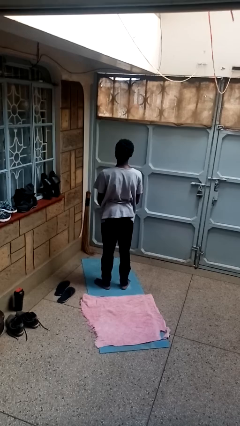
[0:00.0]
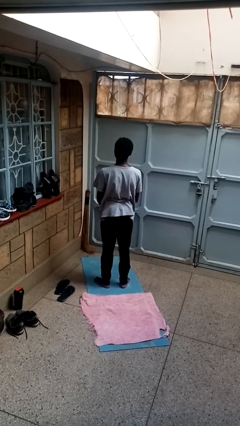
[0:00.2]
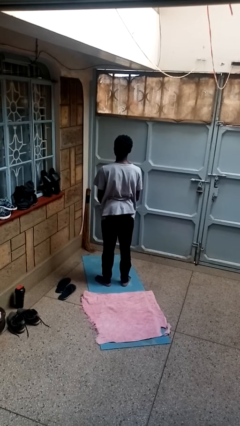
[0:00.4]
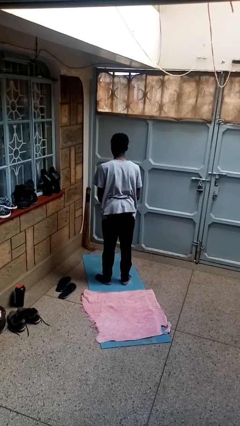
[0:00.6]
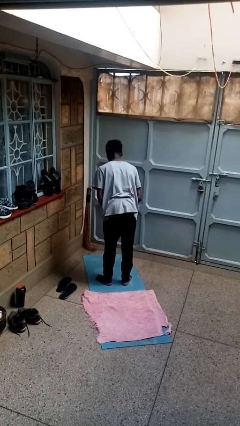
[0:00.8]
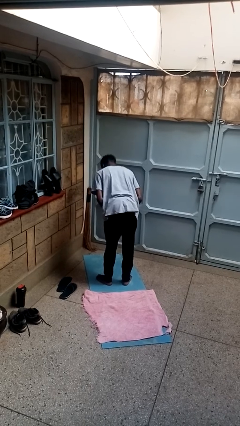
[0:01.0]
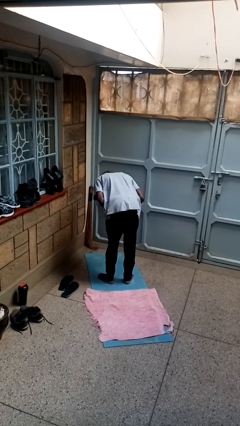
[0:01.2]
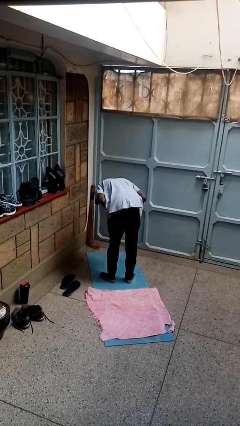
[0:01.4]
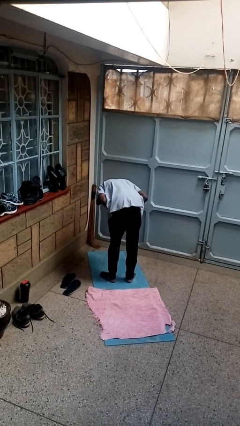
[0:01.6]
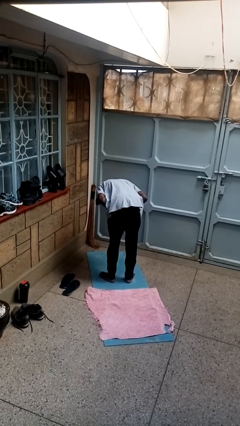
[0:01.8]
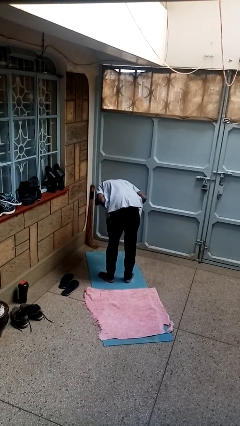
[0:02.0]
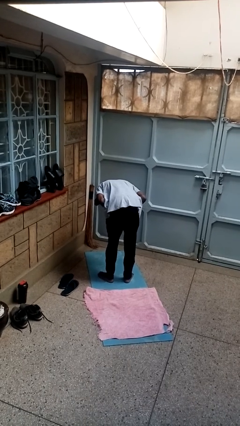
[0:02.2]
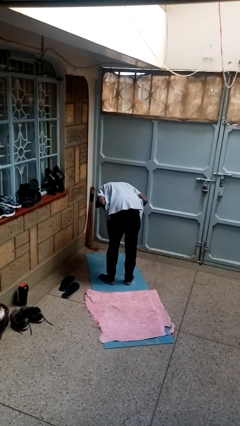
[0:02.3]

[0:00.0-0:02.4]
person bows

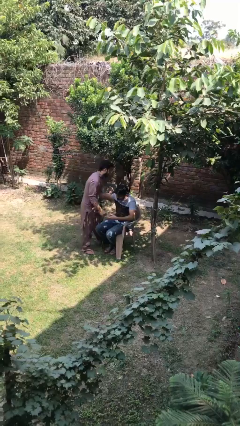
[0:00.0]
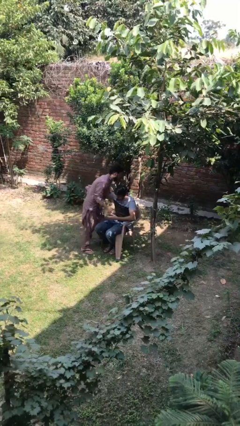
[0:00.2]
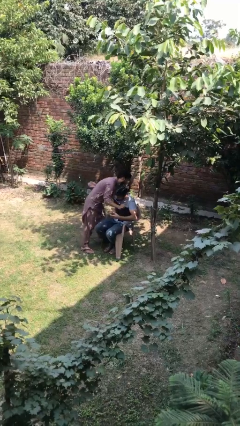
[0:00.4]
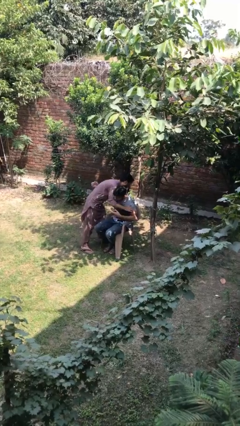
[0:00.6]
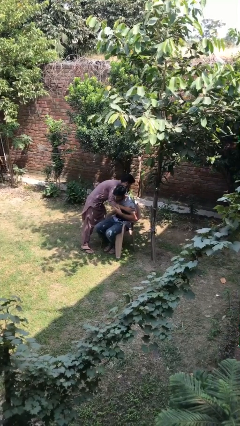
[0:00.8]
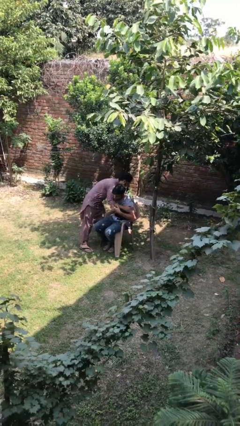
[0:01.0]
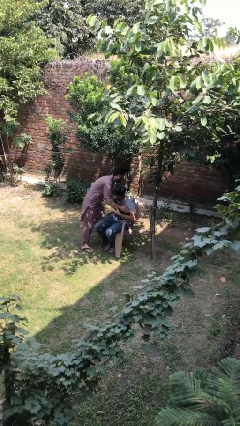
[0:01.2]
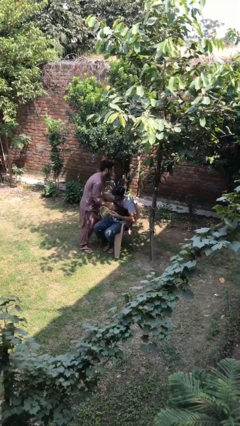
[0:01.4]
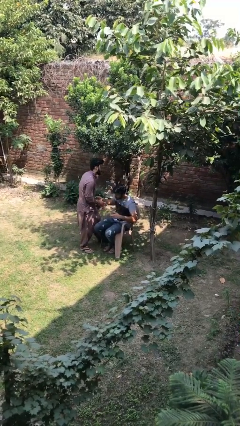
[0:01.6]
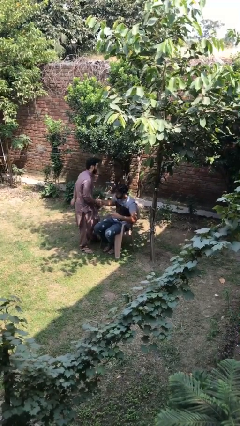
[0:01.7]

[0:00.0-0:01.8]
person embraces person

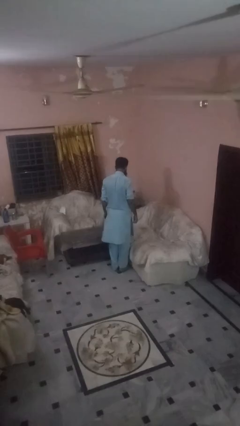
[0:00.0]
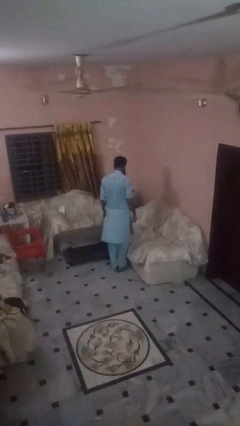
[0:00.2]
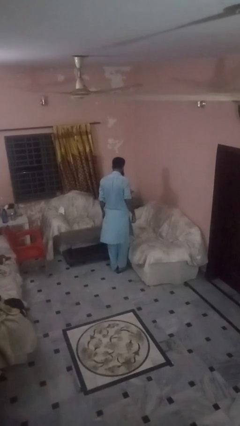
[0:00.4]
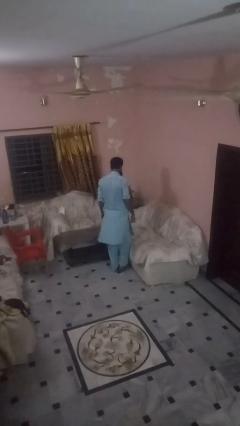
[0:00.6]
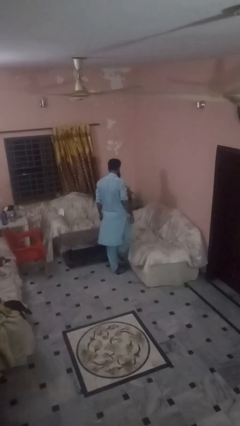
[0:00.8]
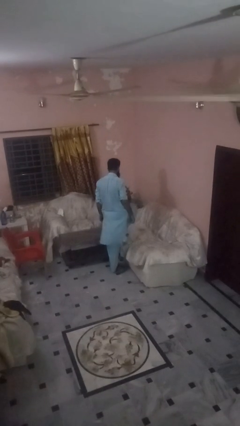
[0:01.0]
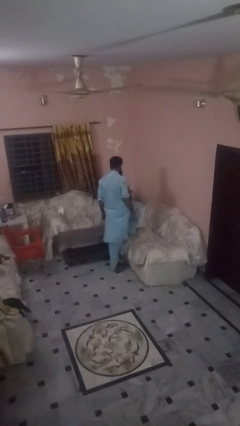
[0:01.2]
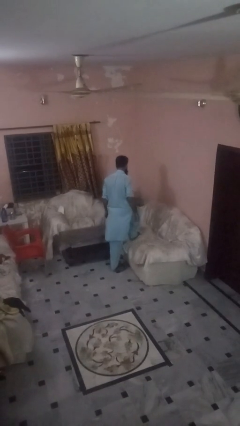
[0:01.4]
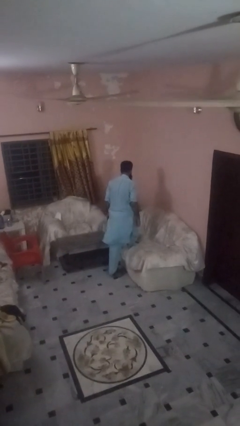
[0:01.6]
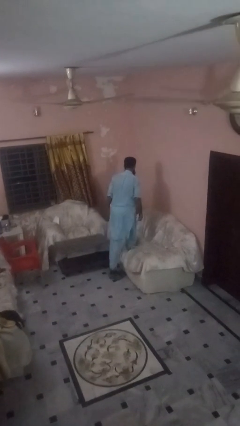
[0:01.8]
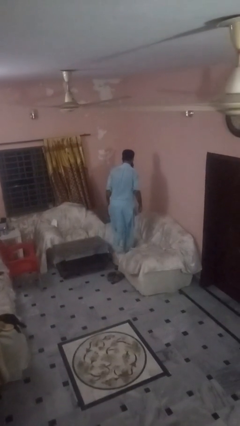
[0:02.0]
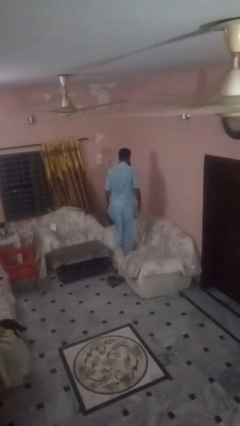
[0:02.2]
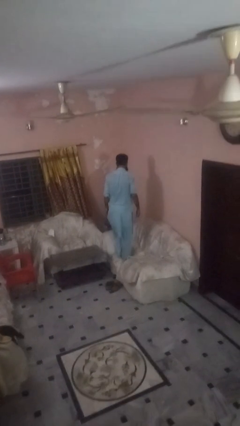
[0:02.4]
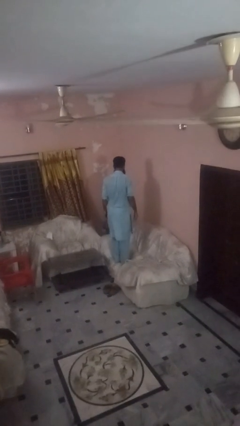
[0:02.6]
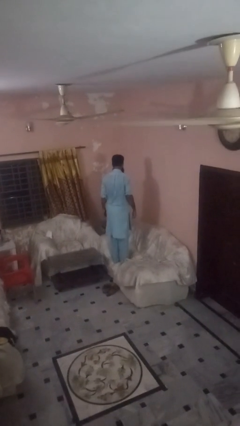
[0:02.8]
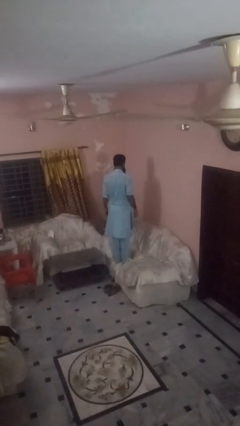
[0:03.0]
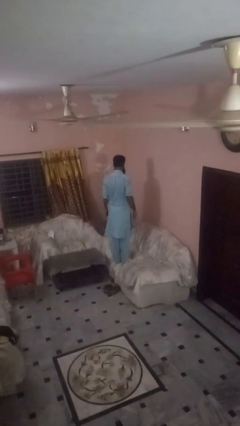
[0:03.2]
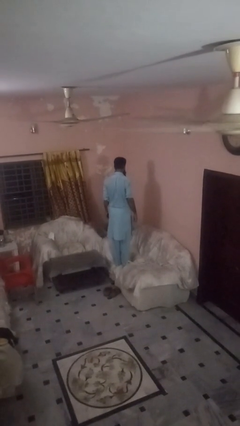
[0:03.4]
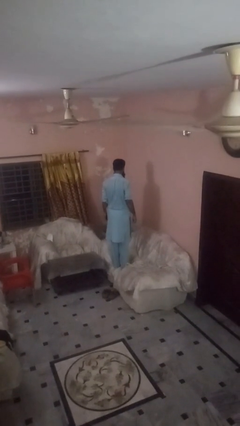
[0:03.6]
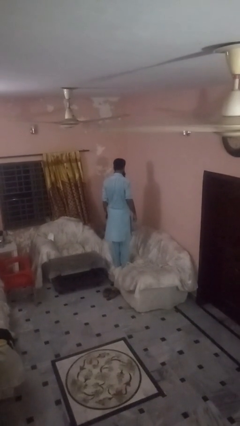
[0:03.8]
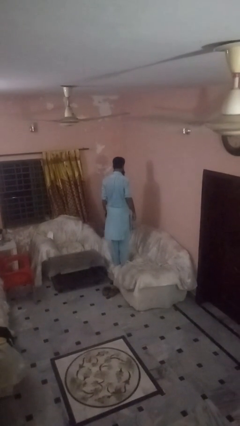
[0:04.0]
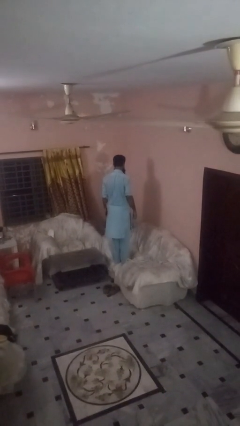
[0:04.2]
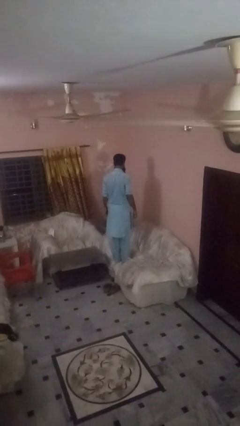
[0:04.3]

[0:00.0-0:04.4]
person climbs on couch

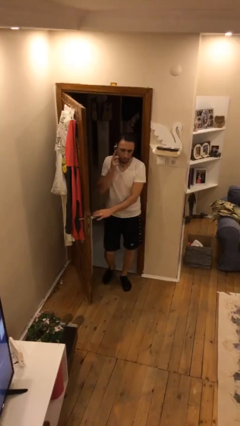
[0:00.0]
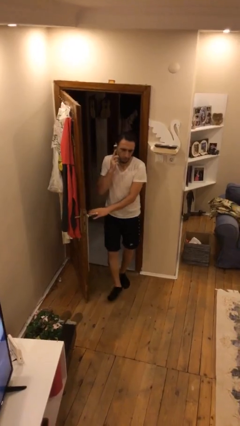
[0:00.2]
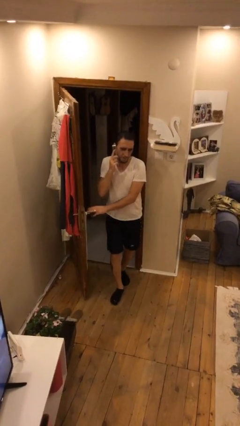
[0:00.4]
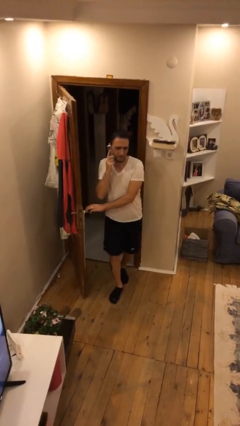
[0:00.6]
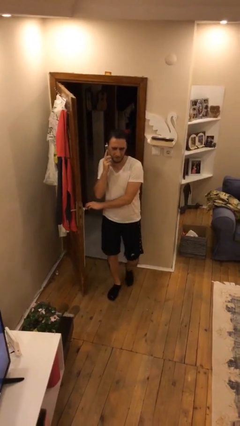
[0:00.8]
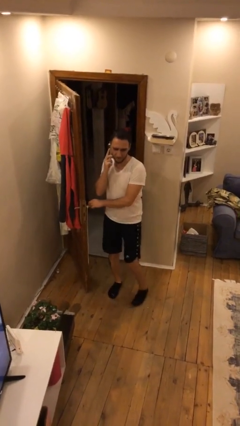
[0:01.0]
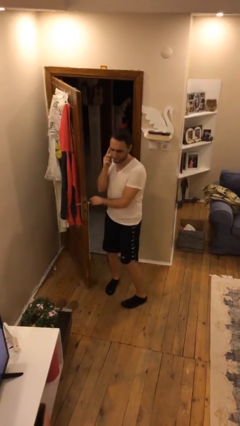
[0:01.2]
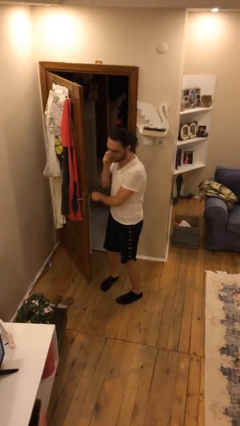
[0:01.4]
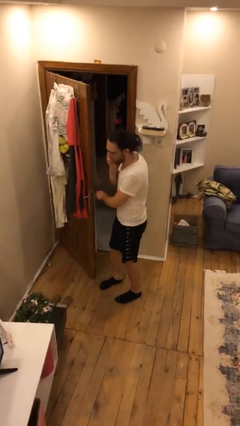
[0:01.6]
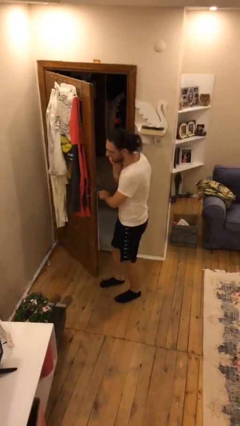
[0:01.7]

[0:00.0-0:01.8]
person enters scene through structure

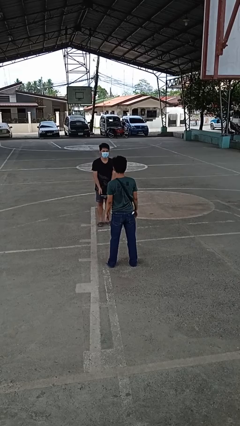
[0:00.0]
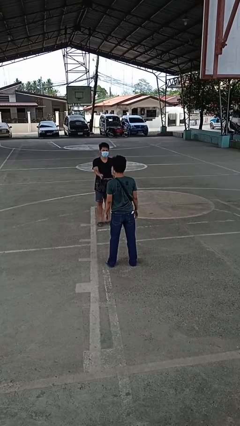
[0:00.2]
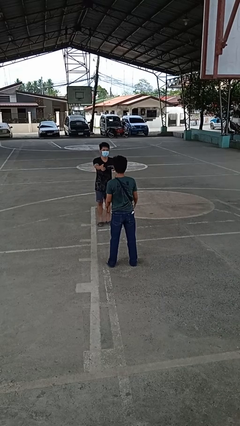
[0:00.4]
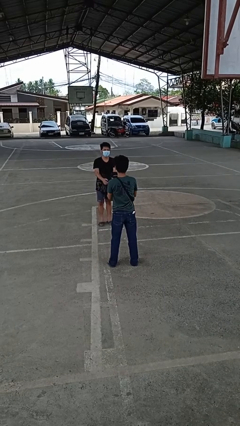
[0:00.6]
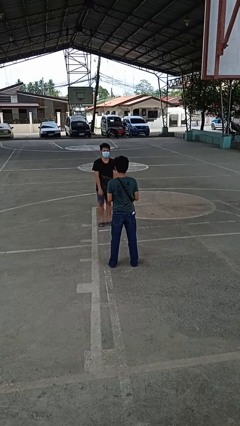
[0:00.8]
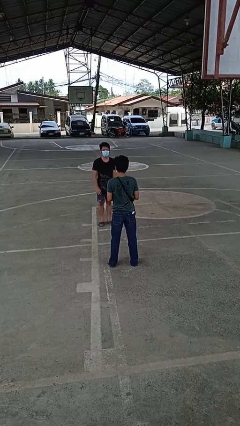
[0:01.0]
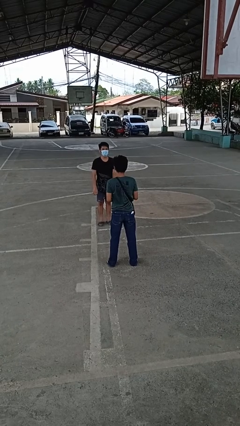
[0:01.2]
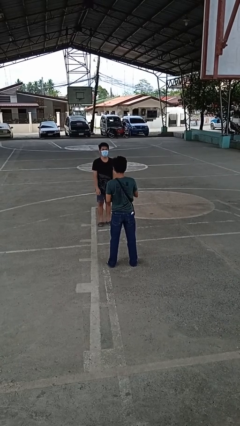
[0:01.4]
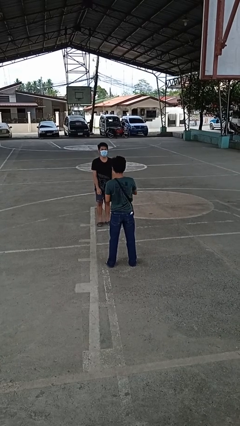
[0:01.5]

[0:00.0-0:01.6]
person catches object from person

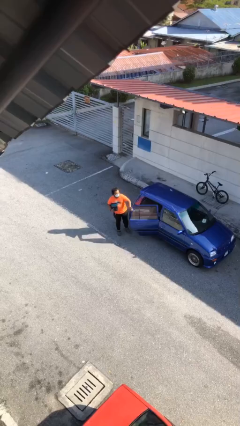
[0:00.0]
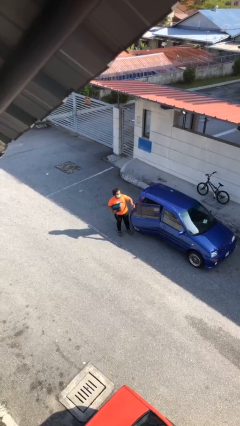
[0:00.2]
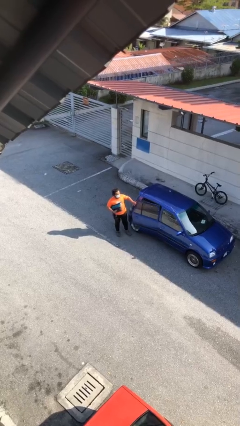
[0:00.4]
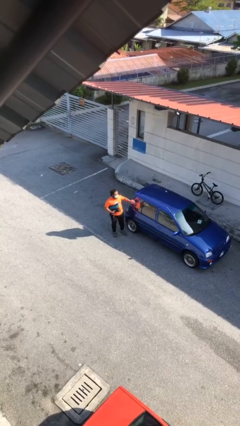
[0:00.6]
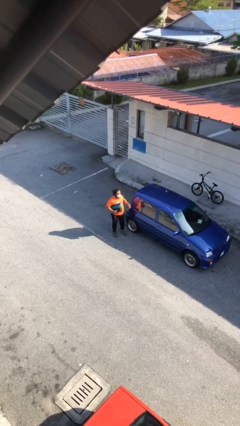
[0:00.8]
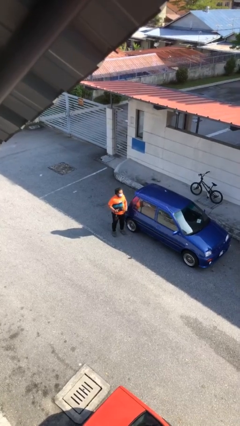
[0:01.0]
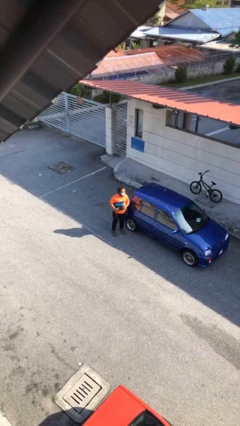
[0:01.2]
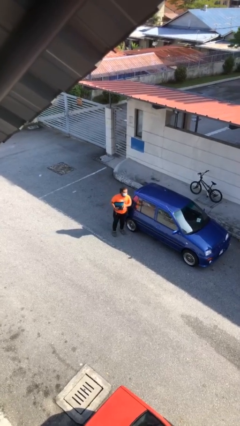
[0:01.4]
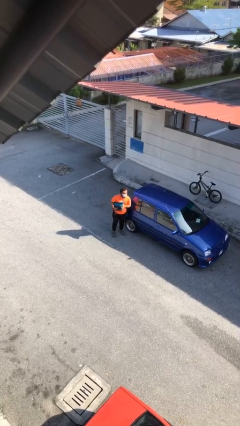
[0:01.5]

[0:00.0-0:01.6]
person closes car door

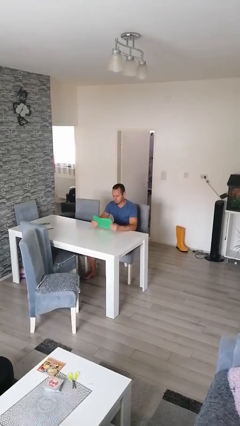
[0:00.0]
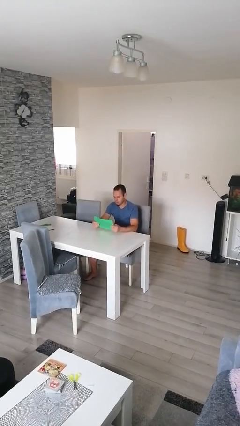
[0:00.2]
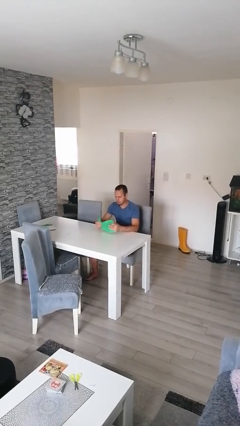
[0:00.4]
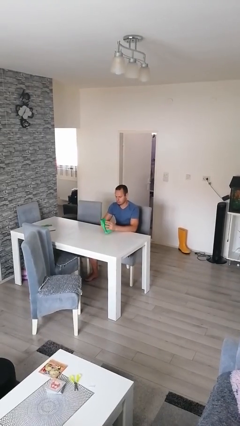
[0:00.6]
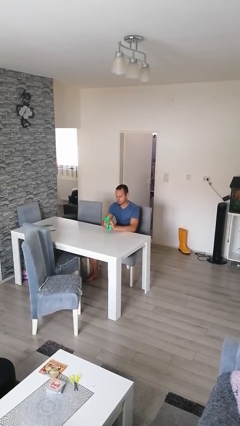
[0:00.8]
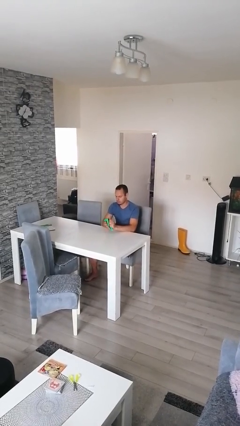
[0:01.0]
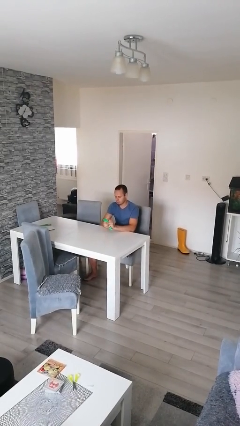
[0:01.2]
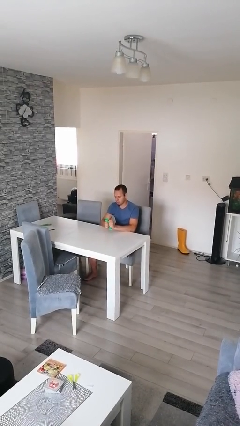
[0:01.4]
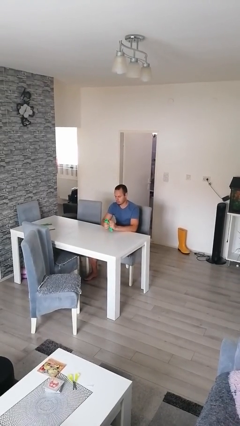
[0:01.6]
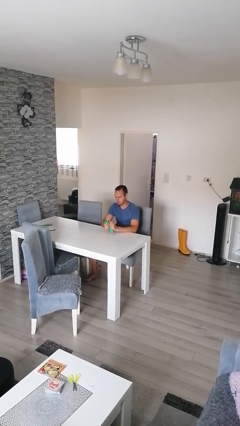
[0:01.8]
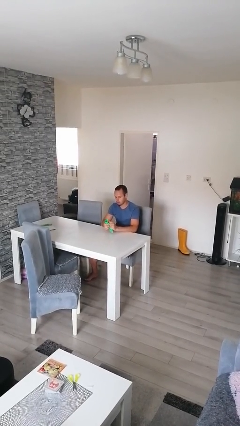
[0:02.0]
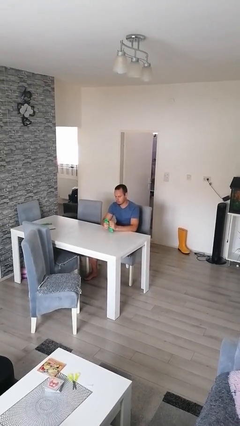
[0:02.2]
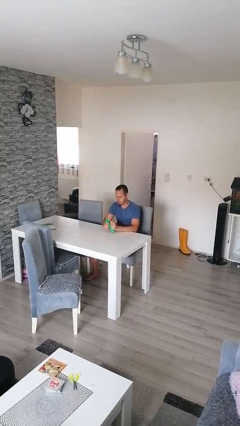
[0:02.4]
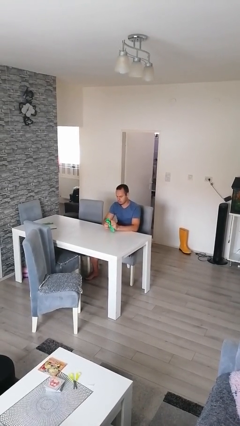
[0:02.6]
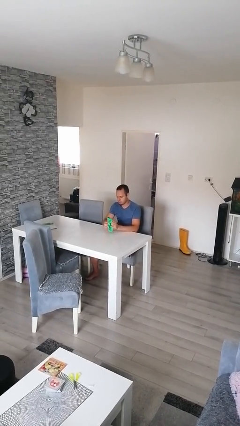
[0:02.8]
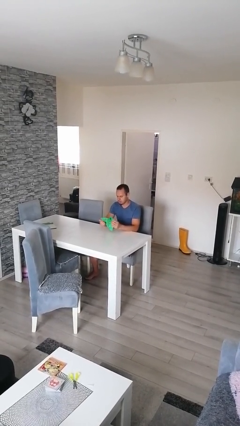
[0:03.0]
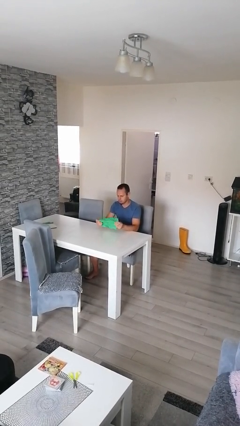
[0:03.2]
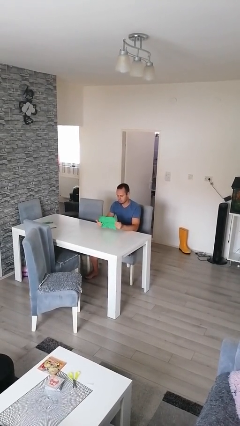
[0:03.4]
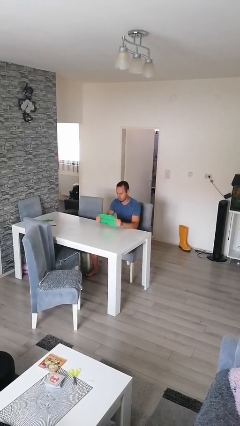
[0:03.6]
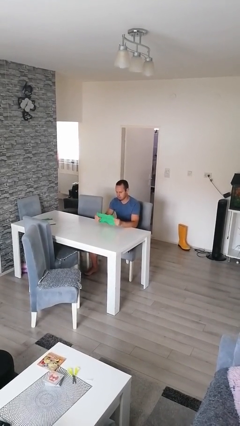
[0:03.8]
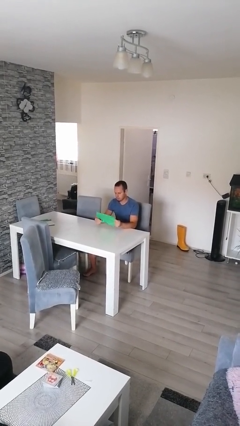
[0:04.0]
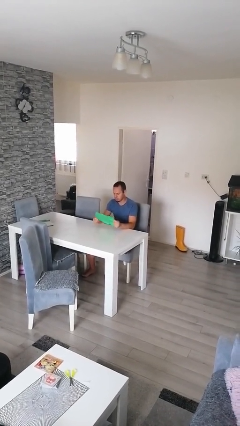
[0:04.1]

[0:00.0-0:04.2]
person crumples paper
